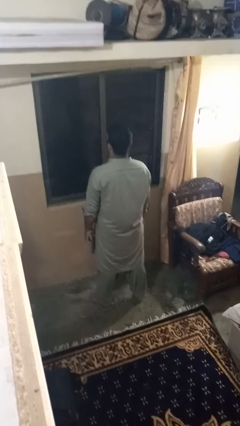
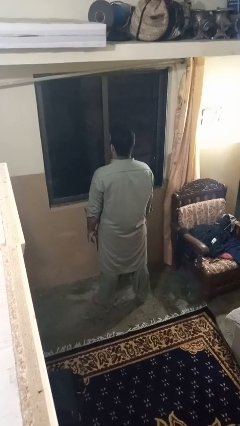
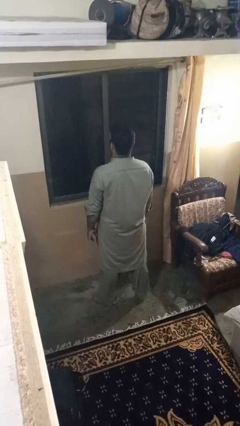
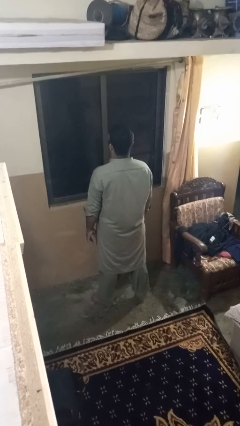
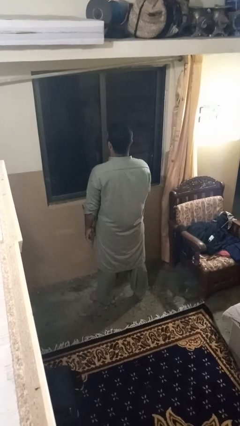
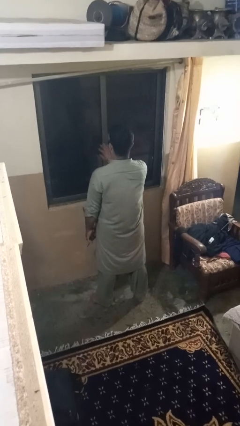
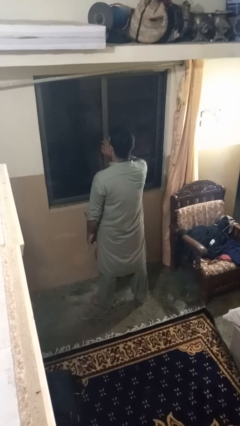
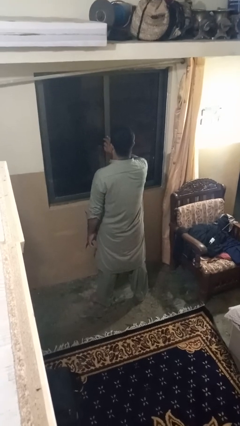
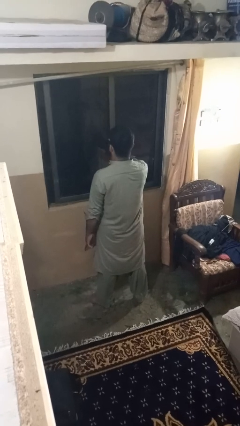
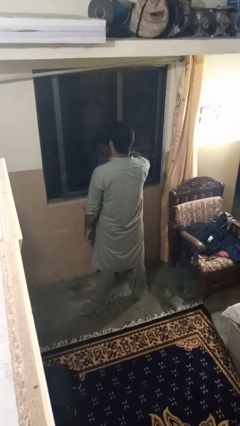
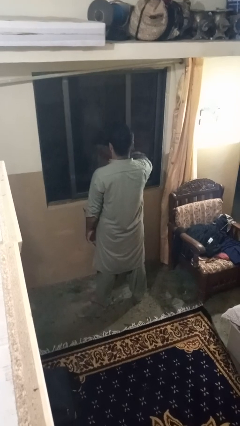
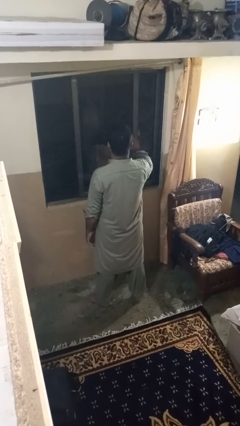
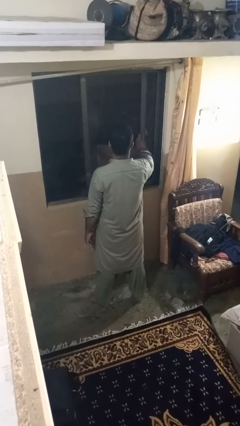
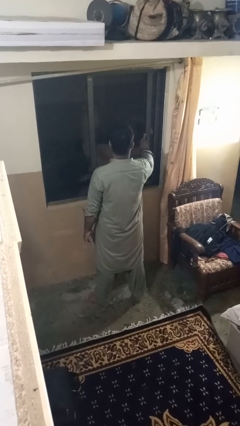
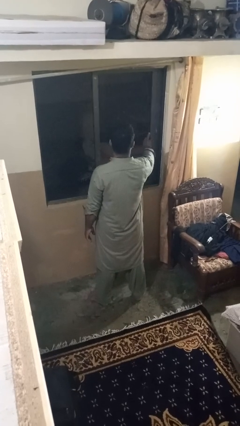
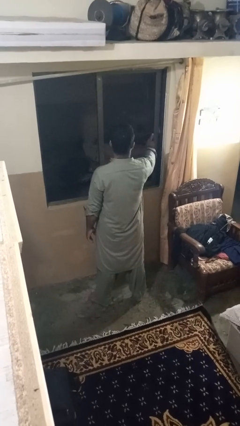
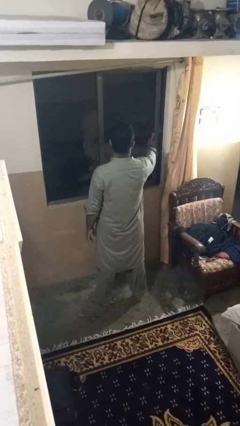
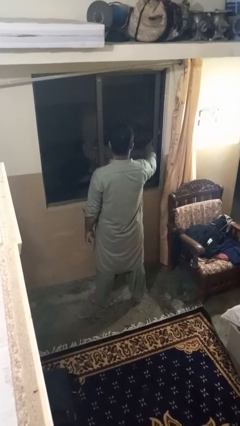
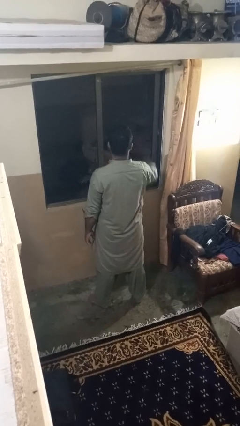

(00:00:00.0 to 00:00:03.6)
person opens home window

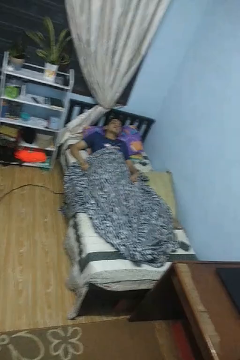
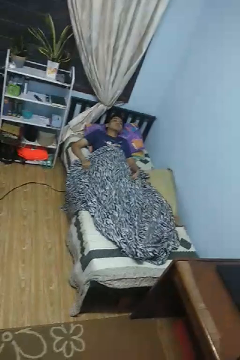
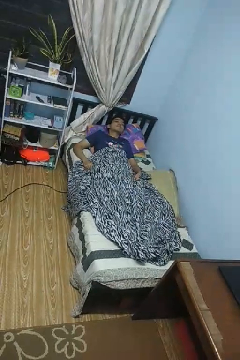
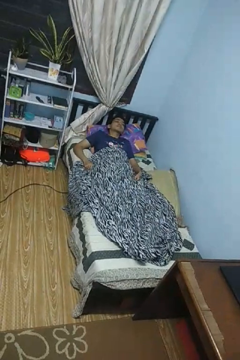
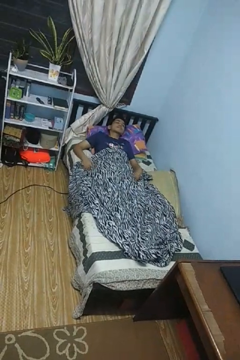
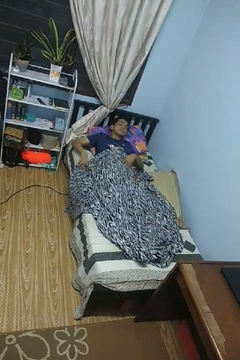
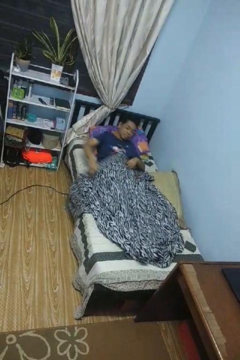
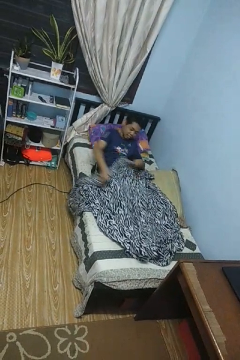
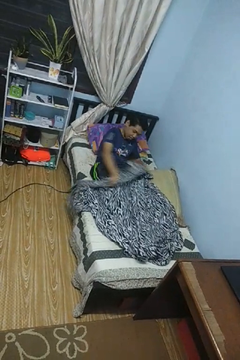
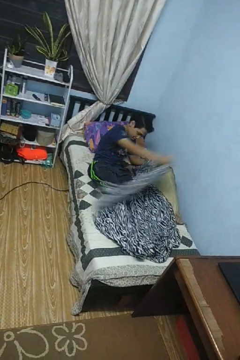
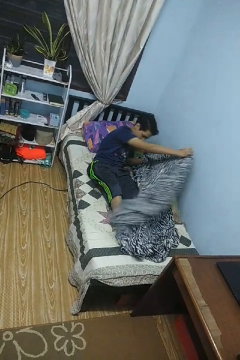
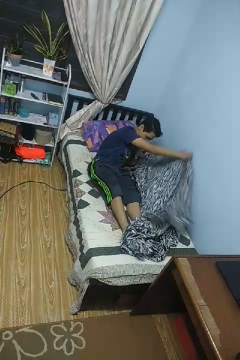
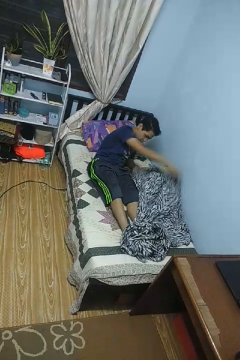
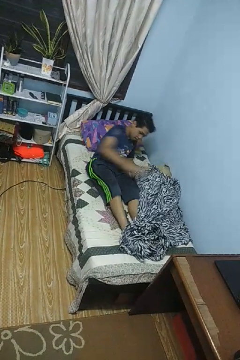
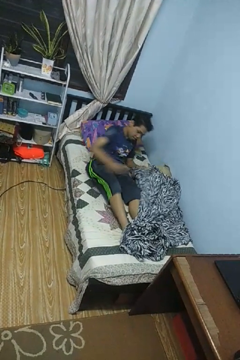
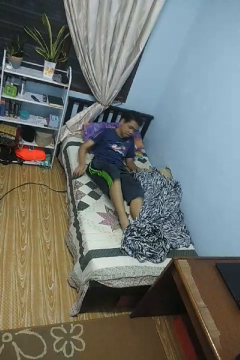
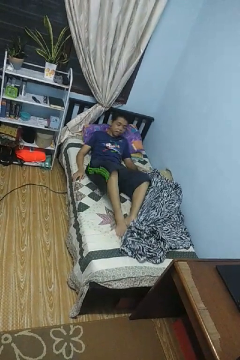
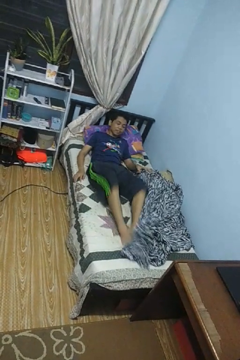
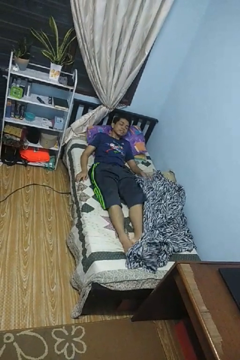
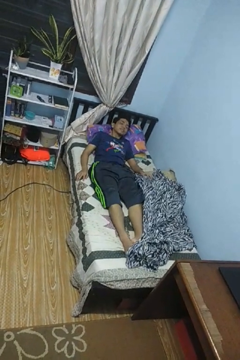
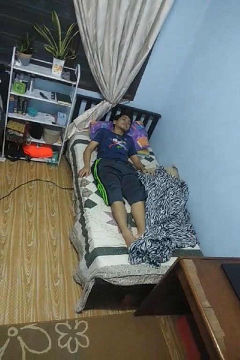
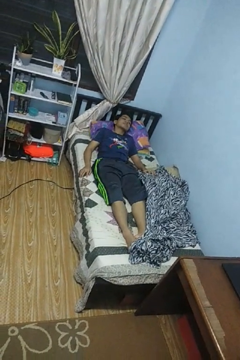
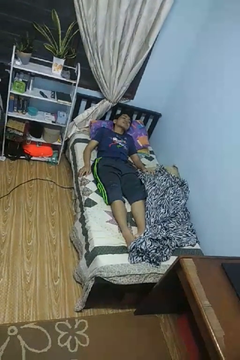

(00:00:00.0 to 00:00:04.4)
person uncovers with blanket

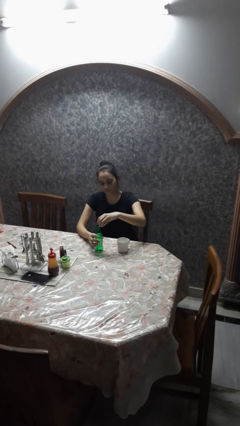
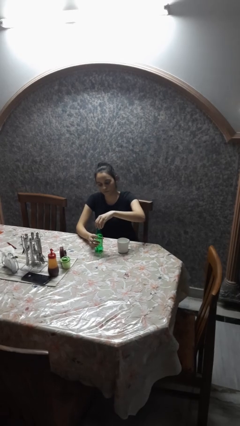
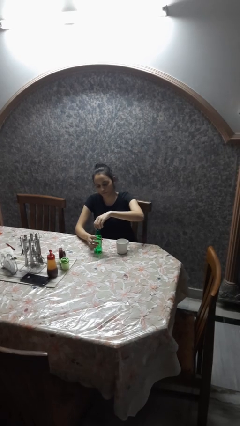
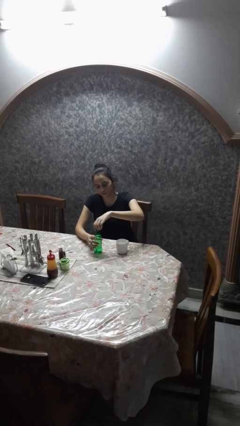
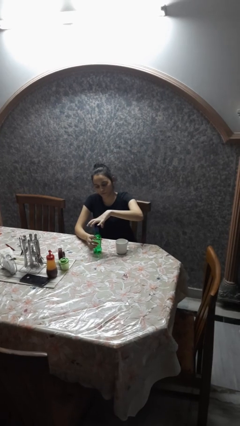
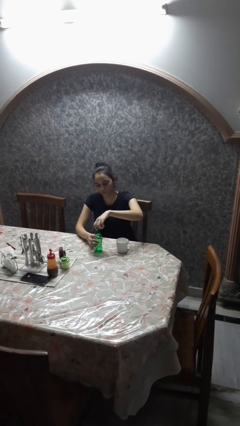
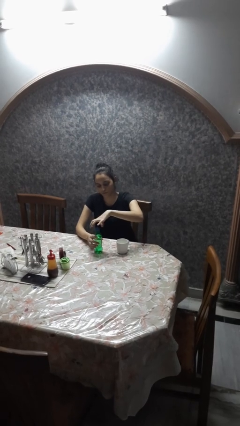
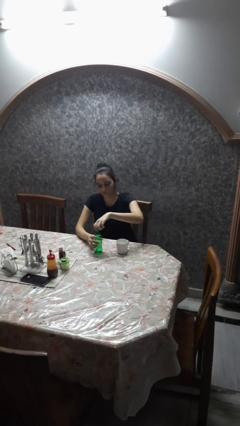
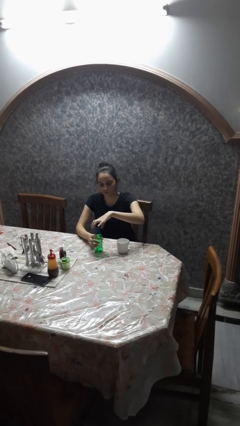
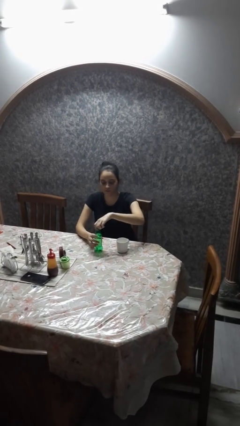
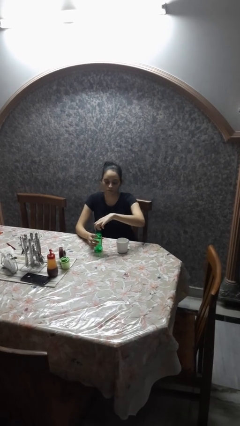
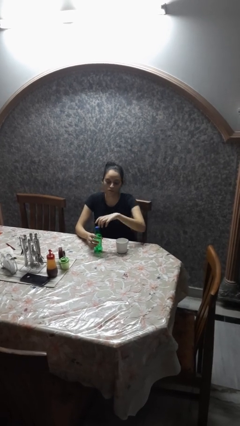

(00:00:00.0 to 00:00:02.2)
person screws lid to bottle

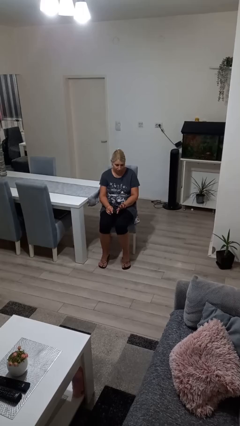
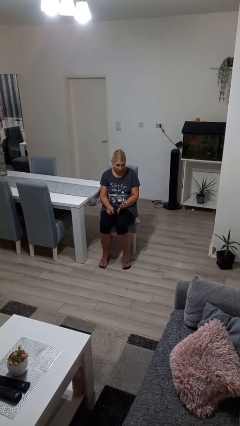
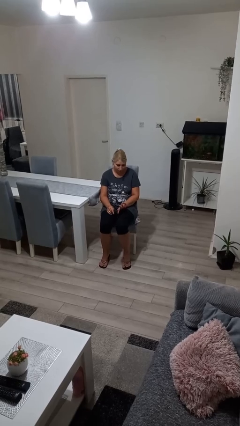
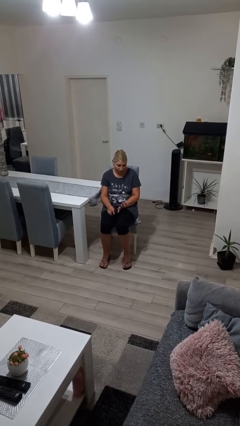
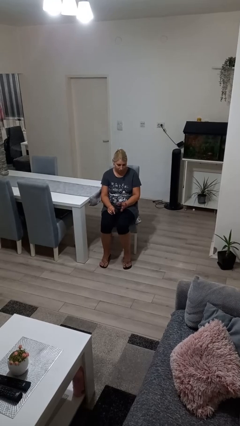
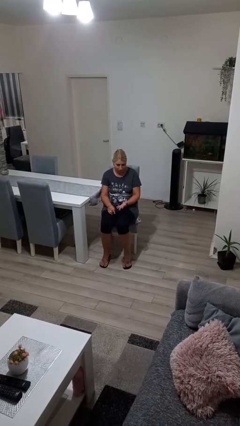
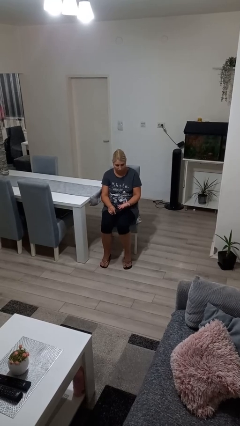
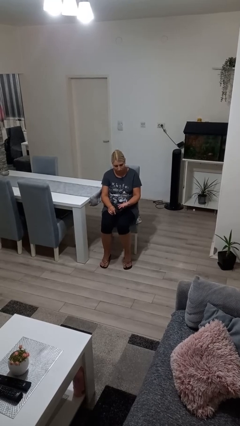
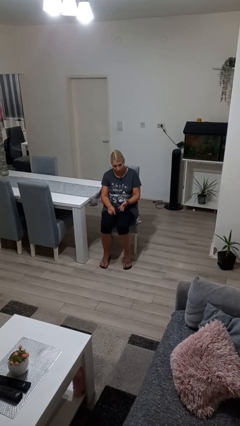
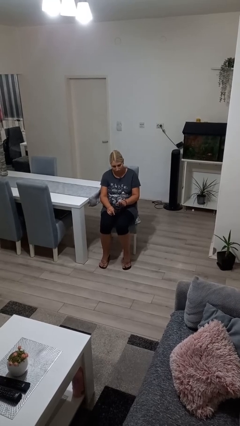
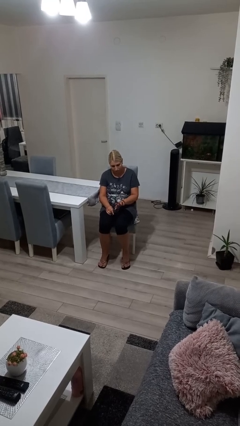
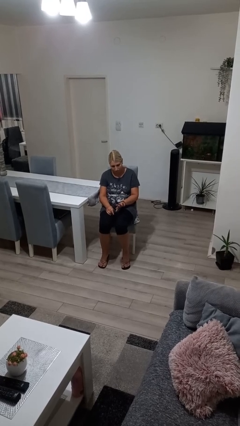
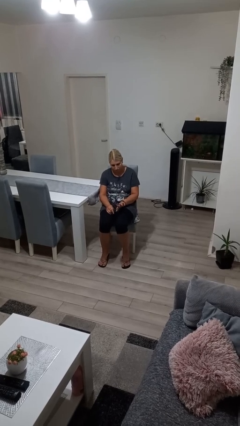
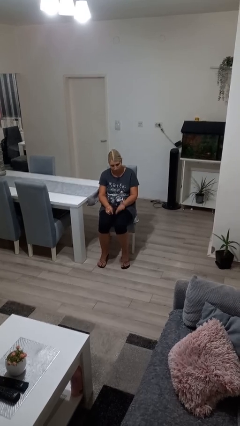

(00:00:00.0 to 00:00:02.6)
person looks at hands in lap

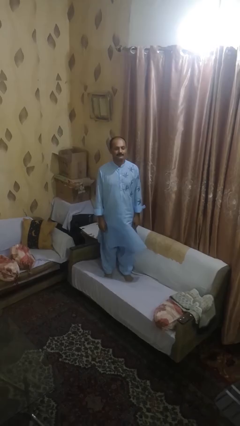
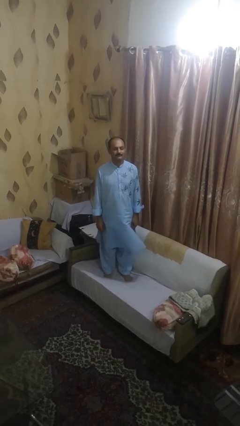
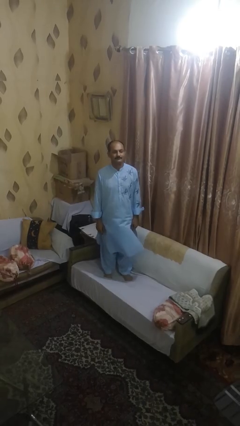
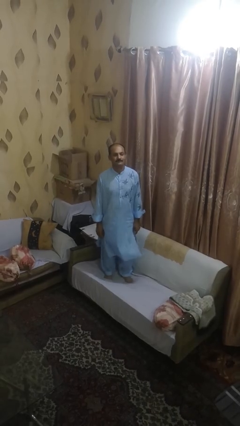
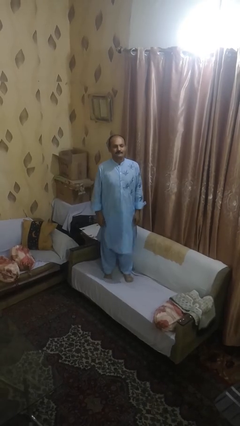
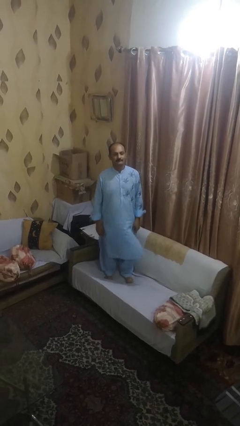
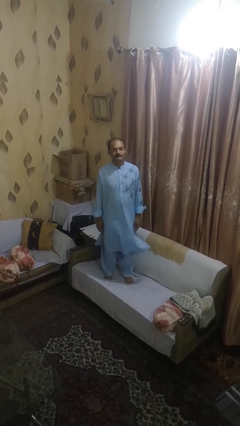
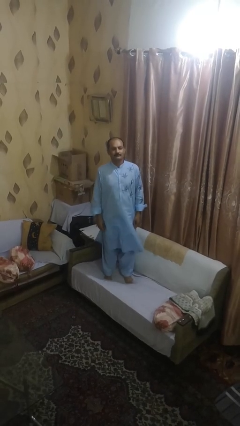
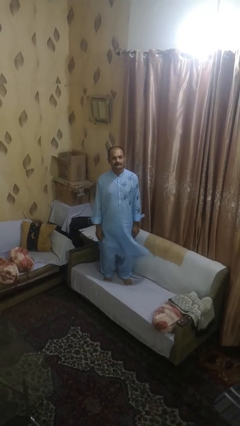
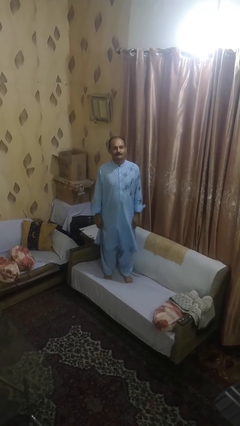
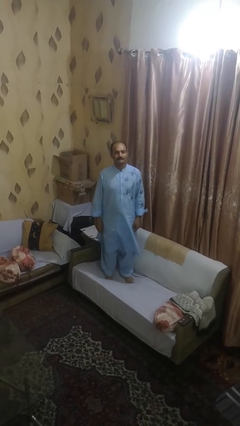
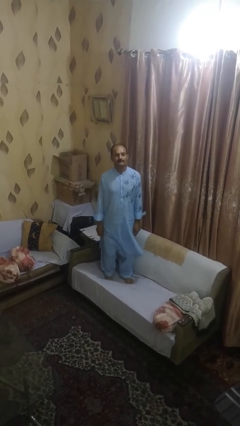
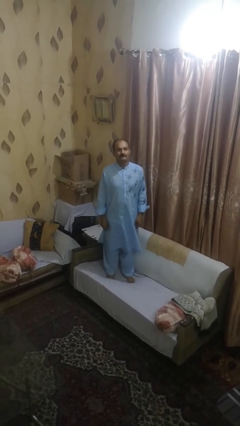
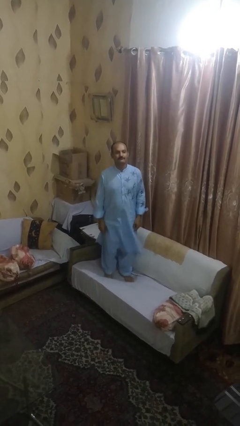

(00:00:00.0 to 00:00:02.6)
person jumps on couch

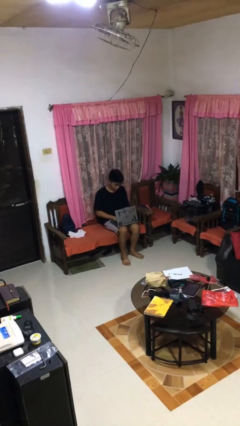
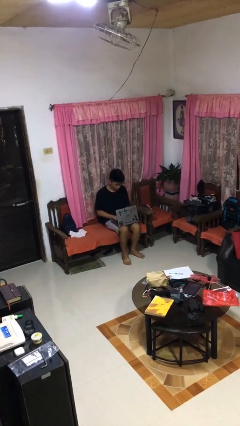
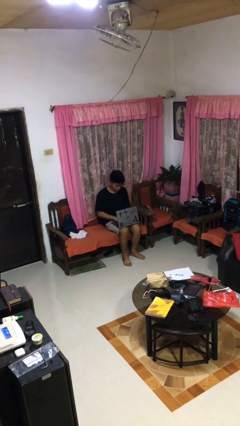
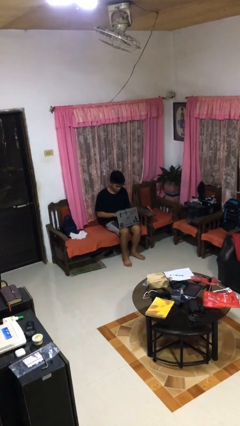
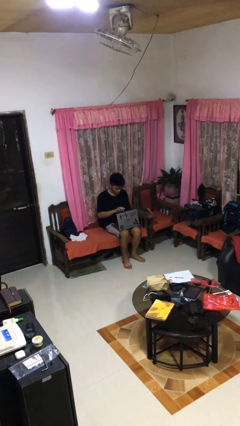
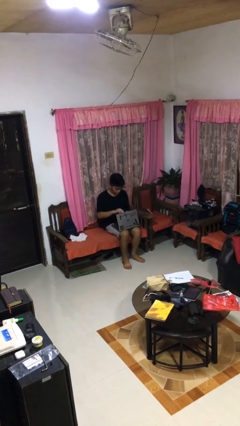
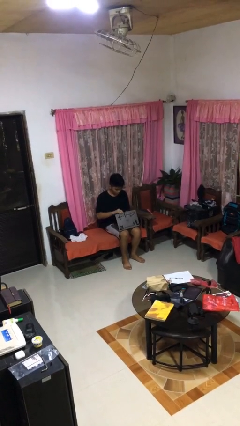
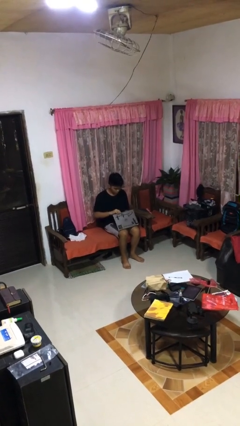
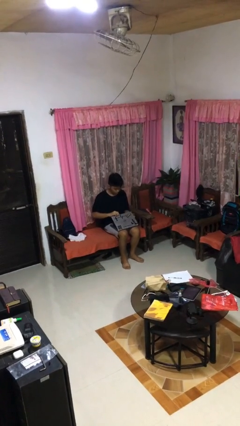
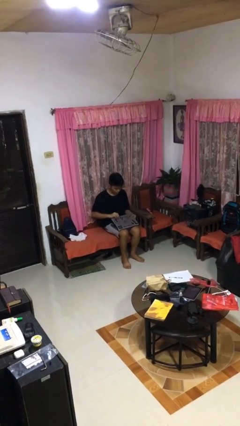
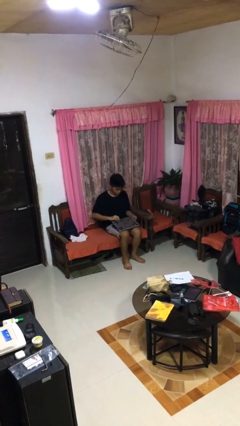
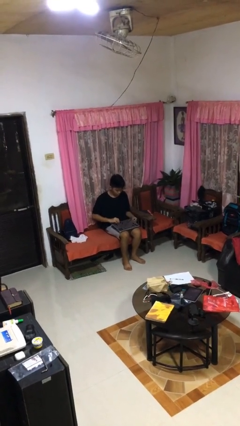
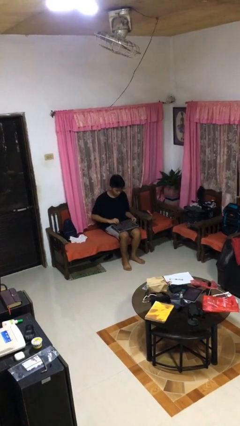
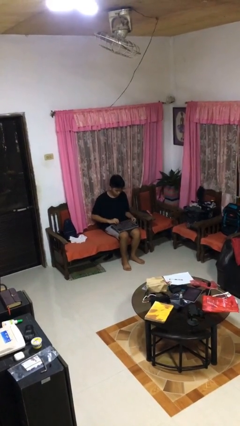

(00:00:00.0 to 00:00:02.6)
person closes laptop

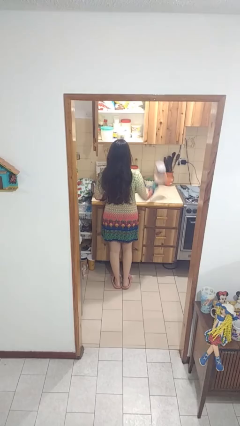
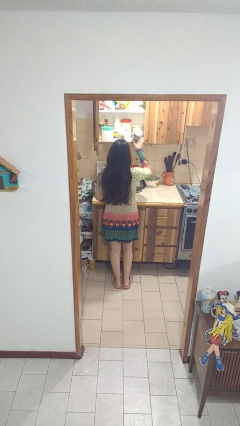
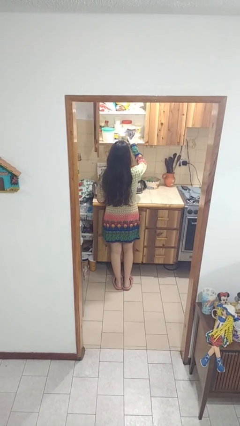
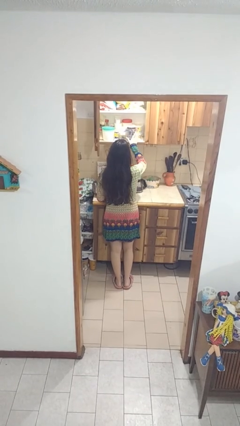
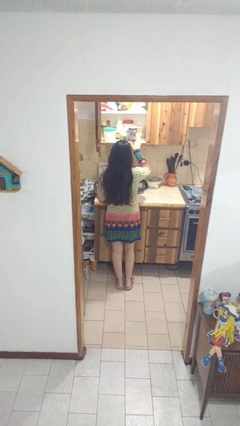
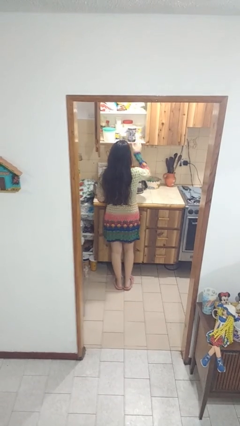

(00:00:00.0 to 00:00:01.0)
person puts object in cabinet
